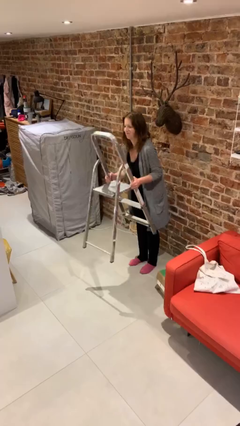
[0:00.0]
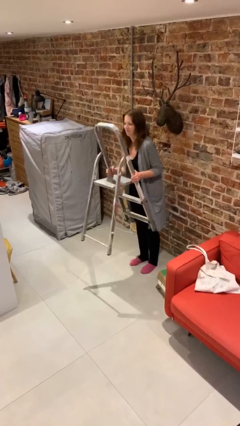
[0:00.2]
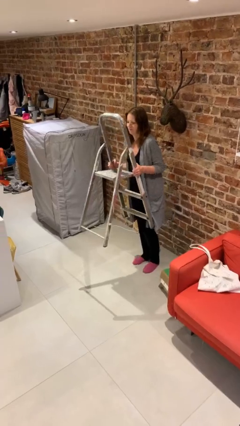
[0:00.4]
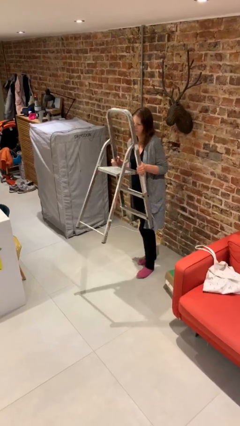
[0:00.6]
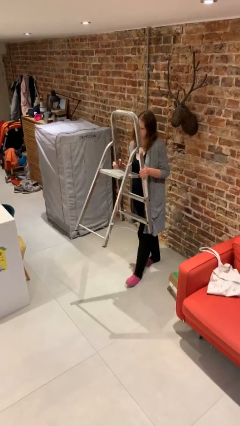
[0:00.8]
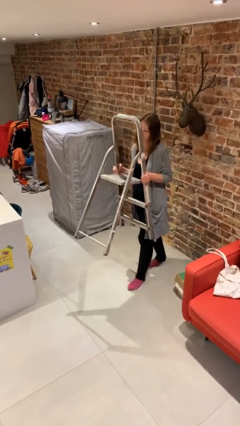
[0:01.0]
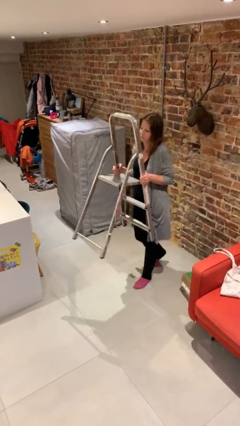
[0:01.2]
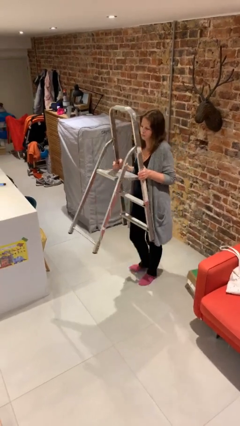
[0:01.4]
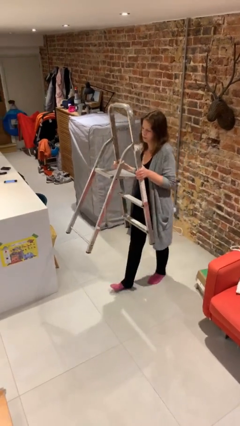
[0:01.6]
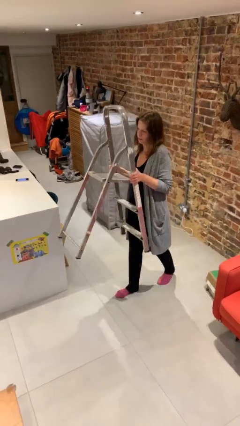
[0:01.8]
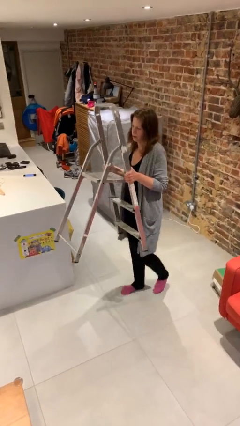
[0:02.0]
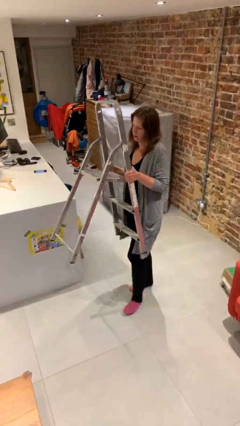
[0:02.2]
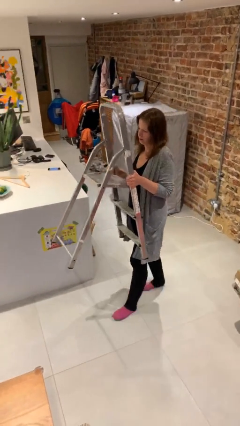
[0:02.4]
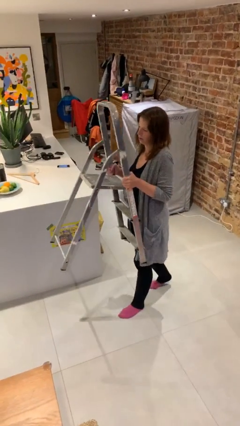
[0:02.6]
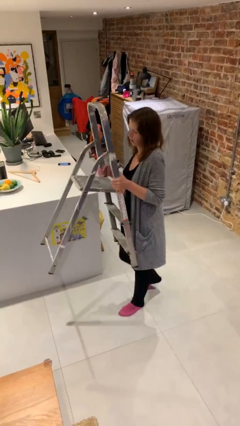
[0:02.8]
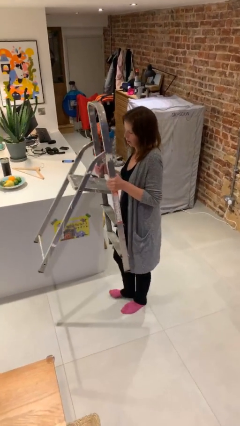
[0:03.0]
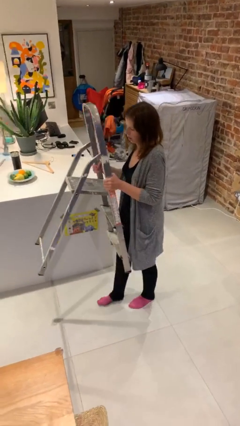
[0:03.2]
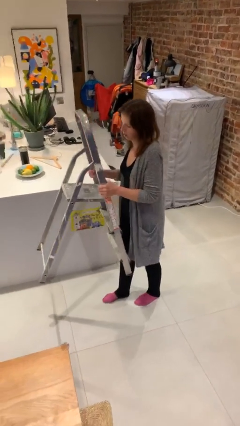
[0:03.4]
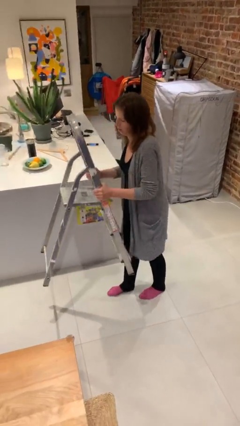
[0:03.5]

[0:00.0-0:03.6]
person carries heavy object

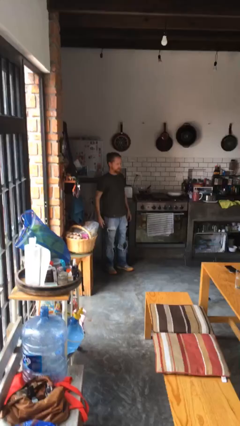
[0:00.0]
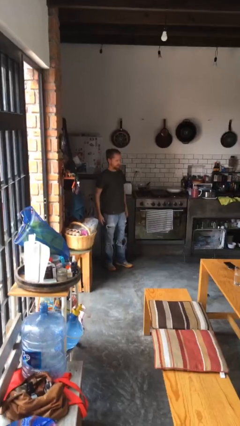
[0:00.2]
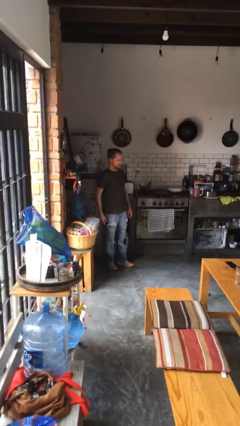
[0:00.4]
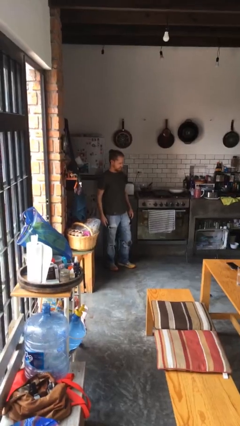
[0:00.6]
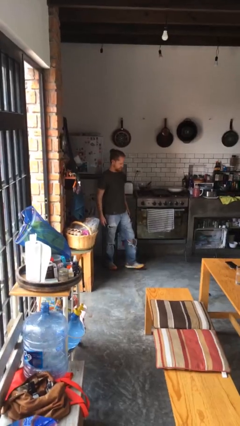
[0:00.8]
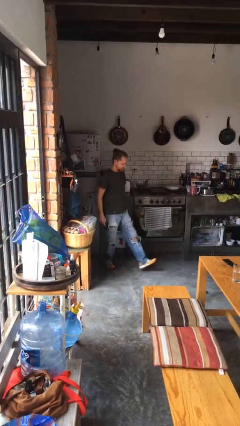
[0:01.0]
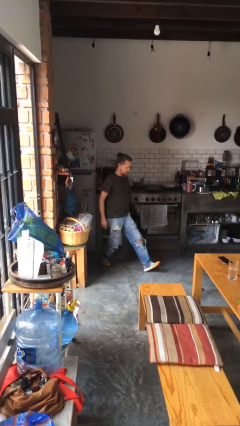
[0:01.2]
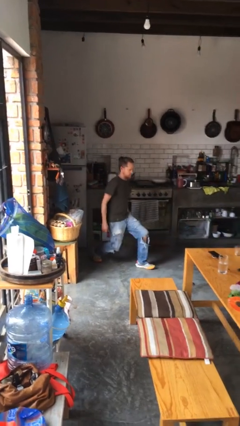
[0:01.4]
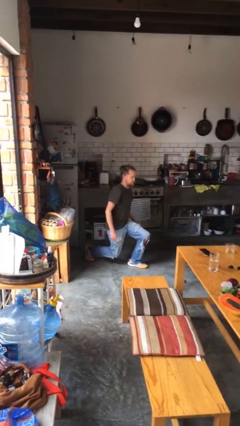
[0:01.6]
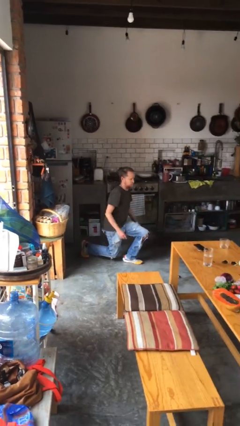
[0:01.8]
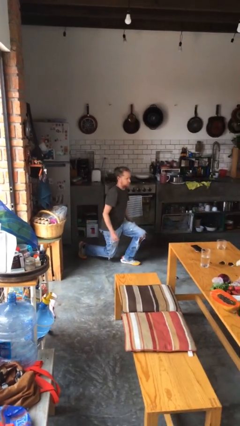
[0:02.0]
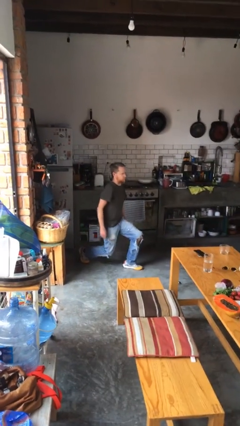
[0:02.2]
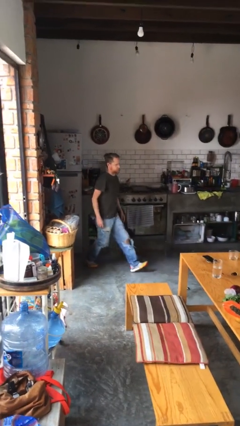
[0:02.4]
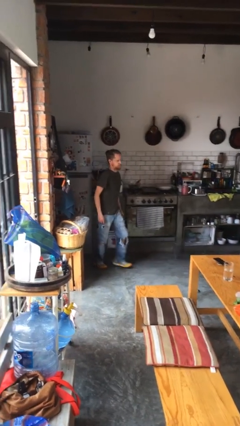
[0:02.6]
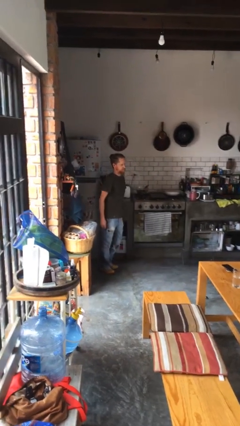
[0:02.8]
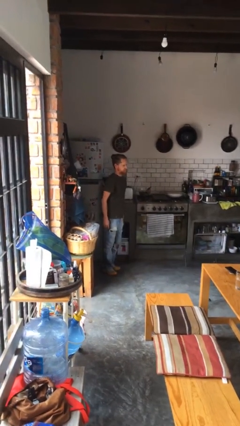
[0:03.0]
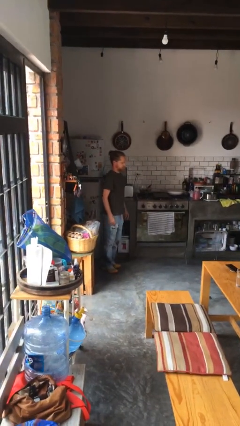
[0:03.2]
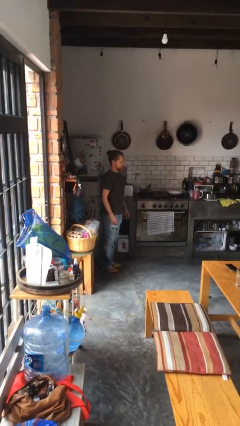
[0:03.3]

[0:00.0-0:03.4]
person exercises with lunges

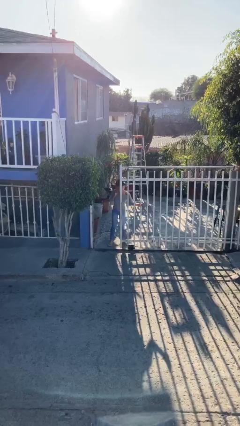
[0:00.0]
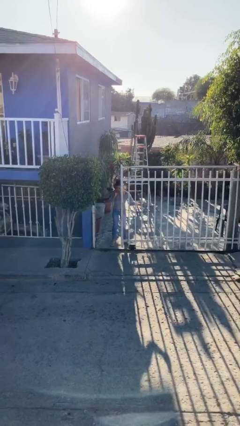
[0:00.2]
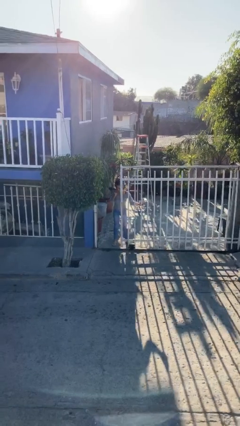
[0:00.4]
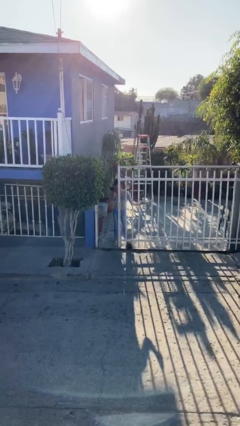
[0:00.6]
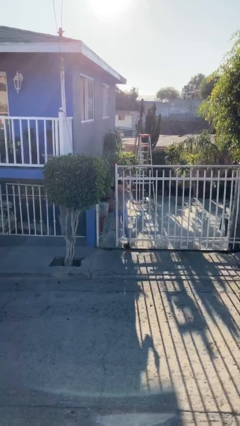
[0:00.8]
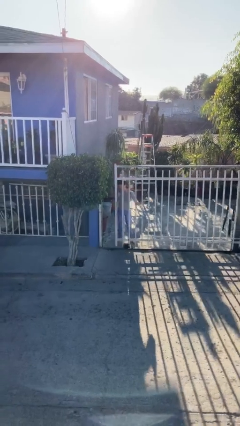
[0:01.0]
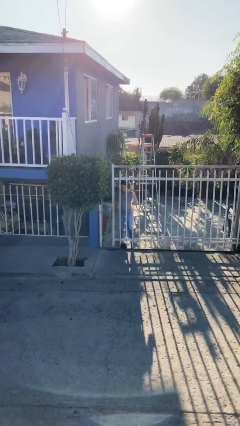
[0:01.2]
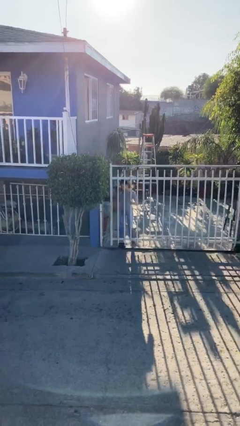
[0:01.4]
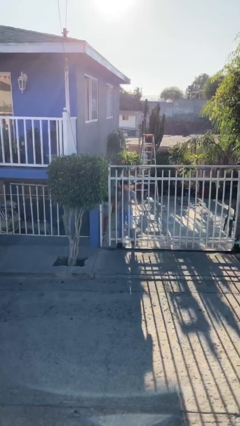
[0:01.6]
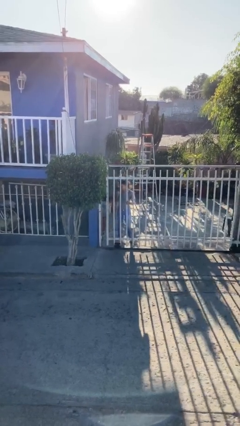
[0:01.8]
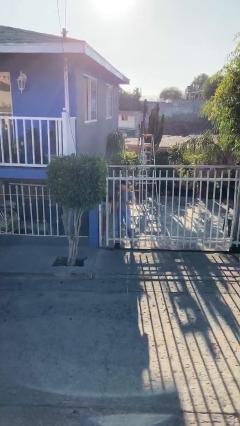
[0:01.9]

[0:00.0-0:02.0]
person closes facility door

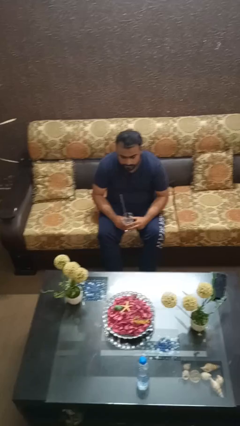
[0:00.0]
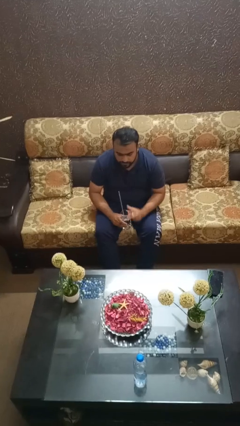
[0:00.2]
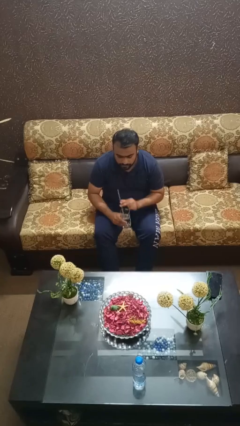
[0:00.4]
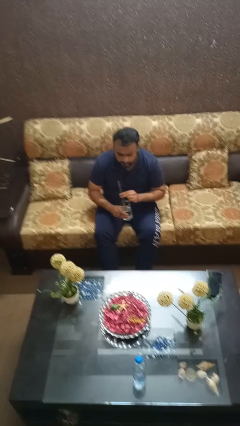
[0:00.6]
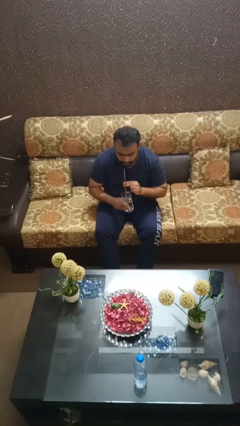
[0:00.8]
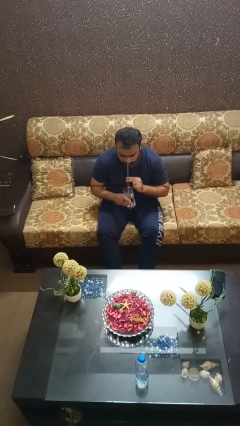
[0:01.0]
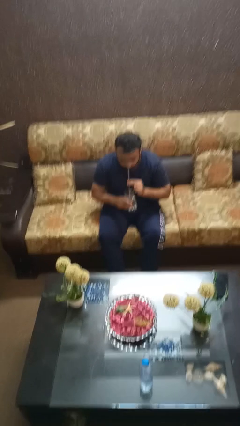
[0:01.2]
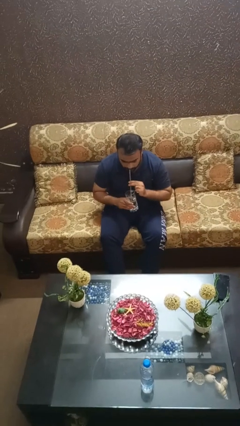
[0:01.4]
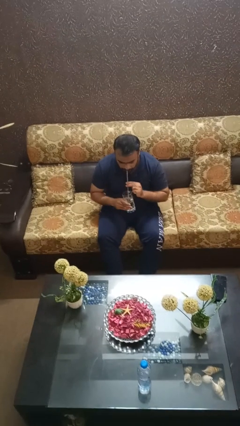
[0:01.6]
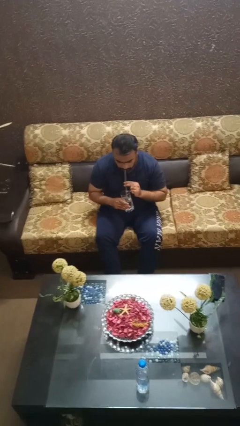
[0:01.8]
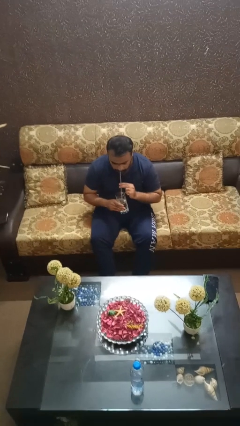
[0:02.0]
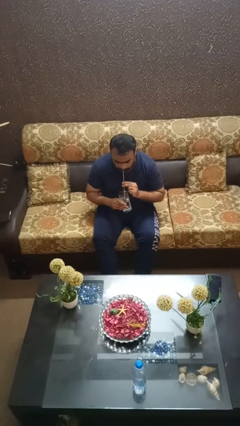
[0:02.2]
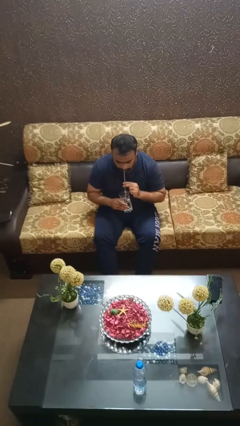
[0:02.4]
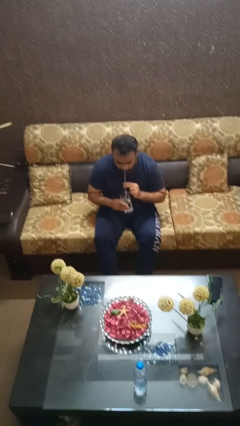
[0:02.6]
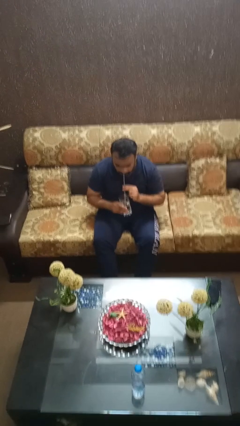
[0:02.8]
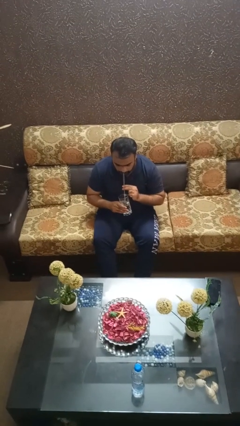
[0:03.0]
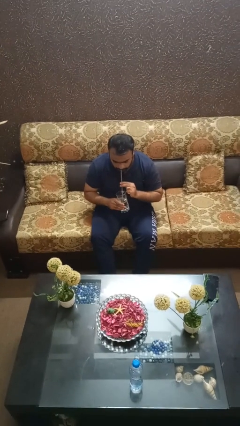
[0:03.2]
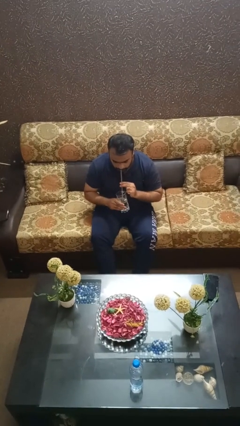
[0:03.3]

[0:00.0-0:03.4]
person drinks from straw

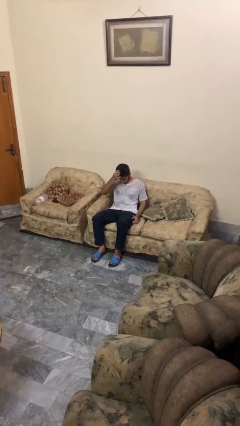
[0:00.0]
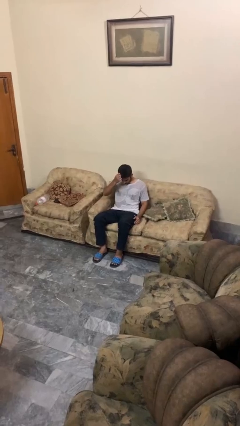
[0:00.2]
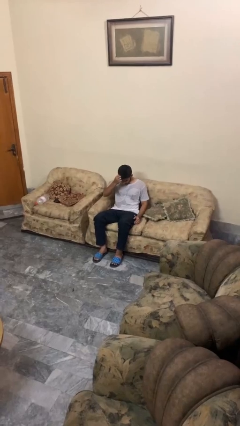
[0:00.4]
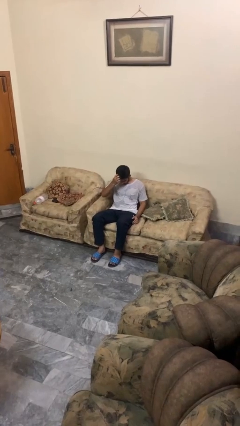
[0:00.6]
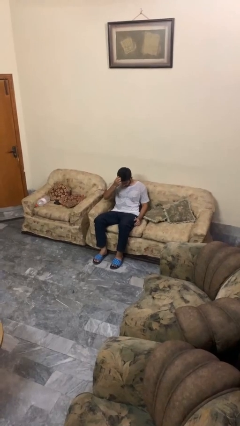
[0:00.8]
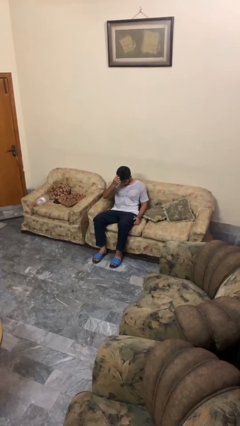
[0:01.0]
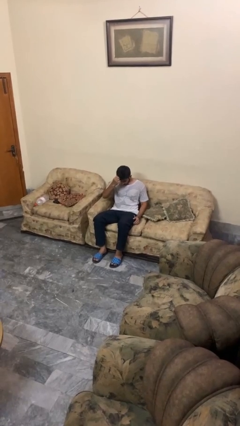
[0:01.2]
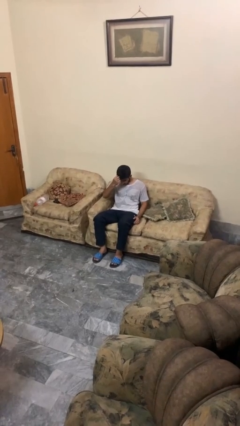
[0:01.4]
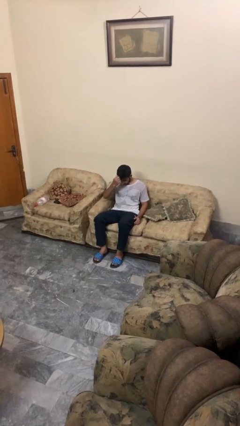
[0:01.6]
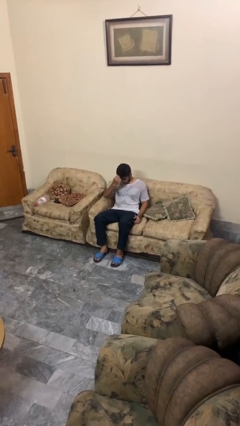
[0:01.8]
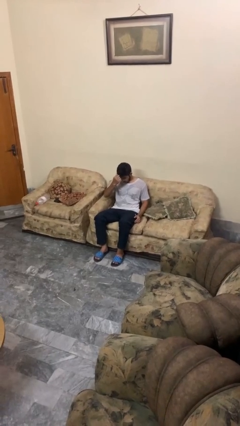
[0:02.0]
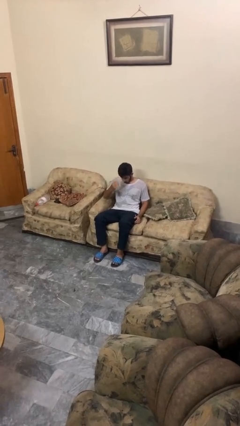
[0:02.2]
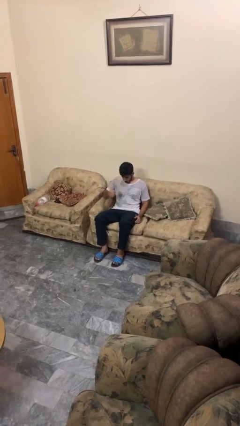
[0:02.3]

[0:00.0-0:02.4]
person scratches face

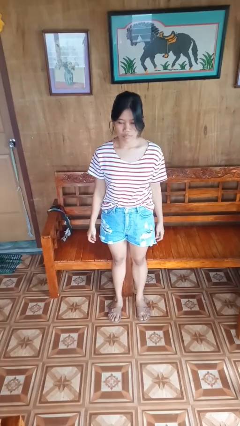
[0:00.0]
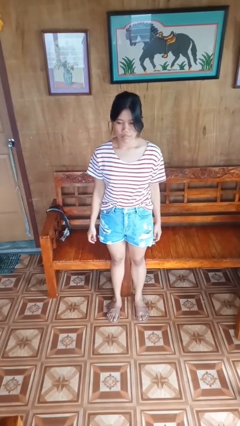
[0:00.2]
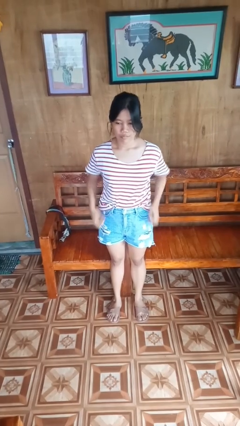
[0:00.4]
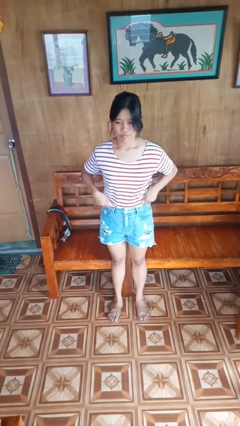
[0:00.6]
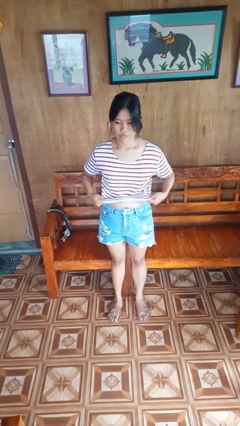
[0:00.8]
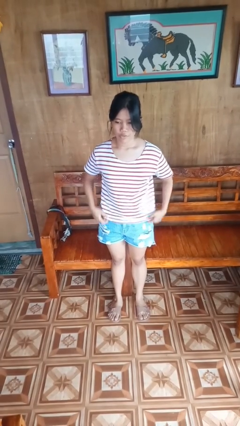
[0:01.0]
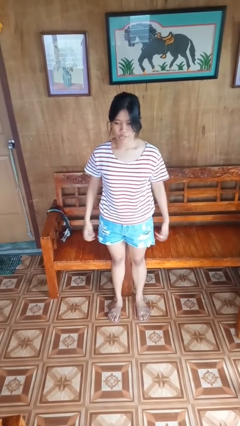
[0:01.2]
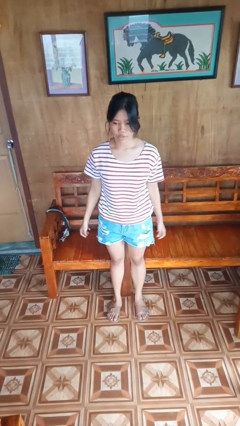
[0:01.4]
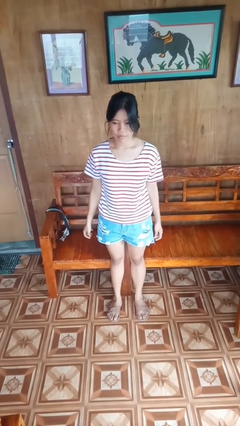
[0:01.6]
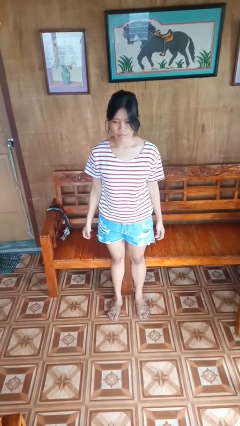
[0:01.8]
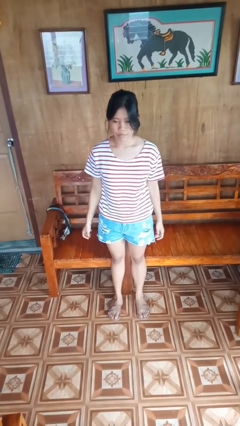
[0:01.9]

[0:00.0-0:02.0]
person untucks shirt

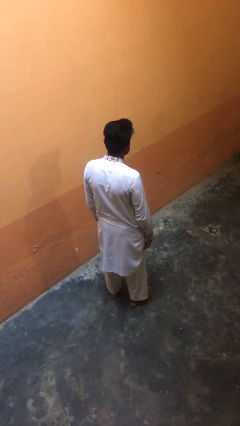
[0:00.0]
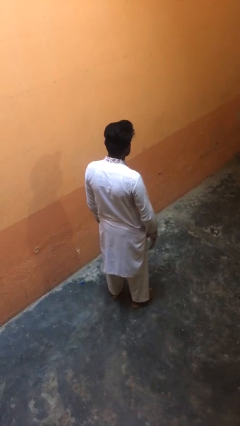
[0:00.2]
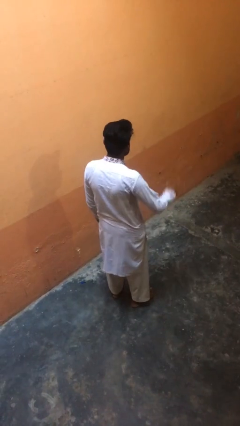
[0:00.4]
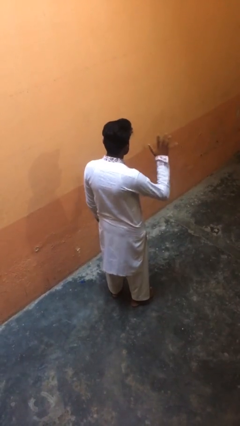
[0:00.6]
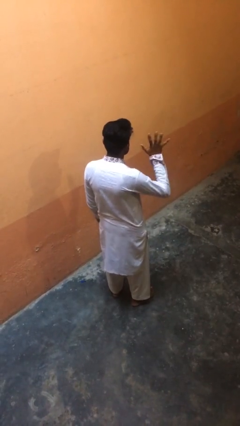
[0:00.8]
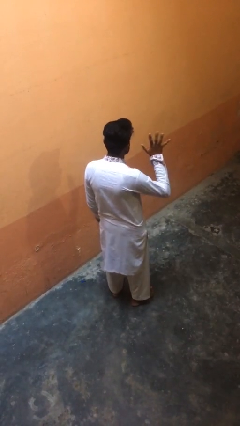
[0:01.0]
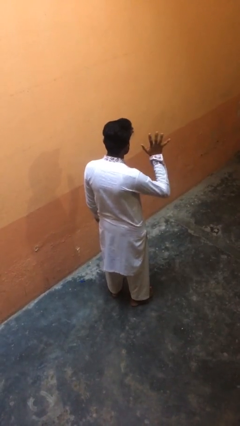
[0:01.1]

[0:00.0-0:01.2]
person gestures number five
